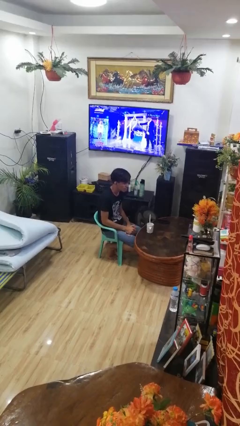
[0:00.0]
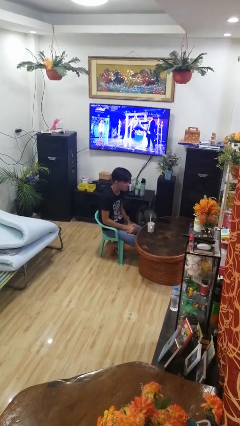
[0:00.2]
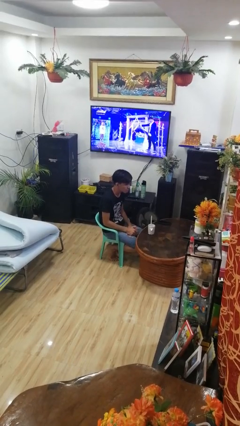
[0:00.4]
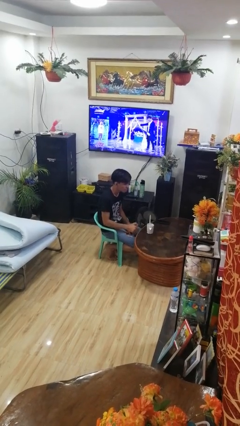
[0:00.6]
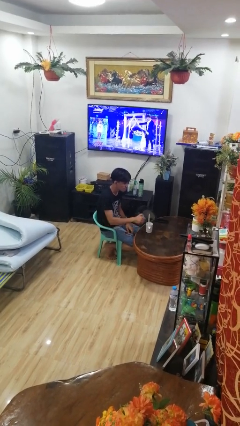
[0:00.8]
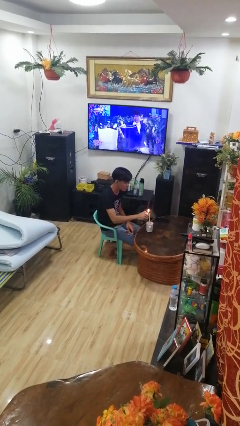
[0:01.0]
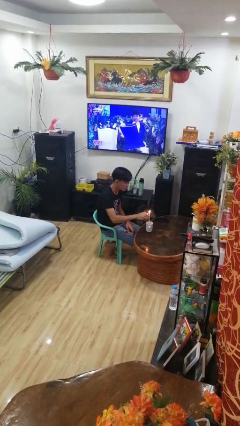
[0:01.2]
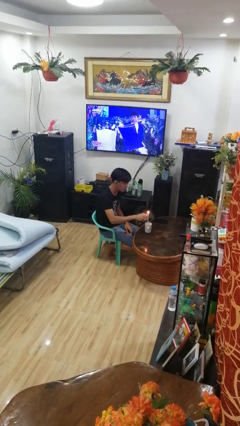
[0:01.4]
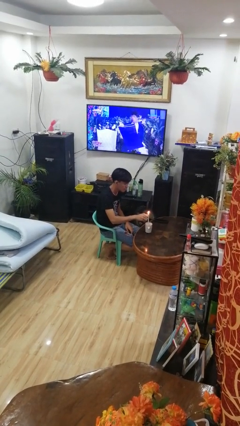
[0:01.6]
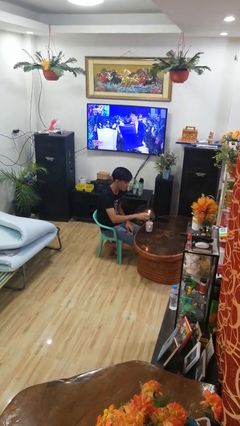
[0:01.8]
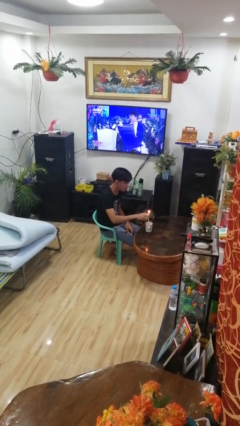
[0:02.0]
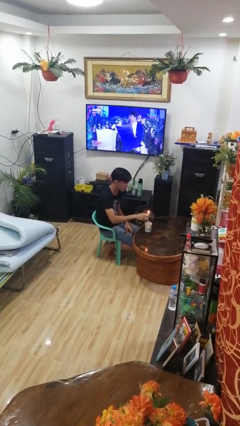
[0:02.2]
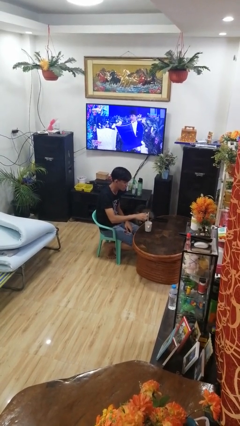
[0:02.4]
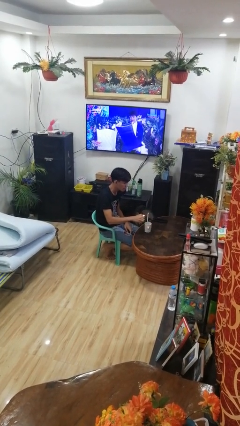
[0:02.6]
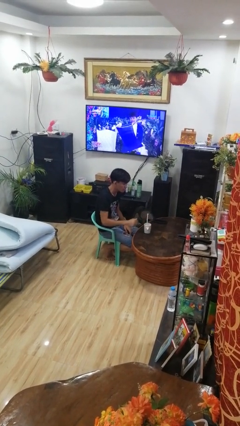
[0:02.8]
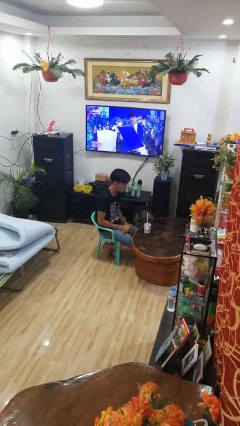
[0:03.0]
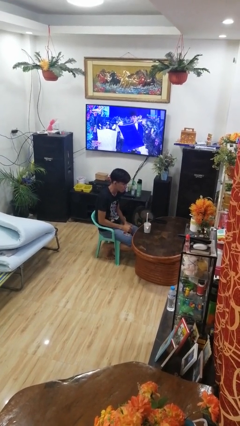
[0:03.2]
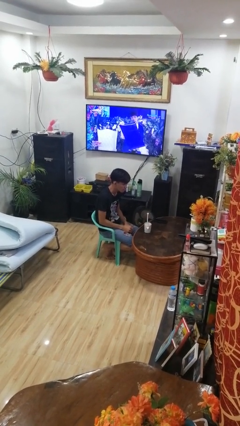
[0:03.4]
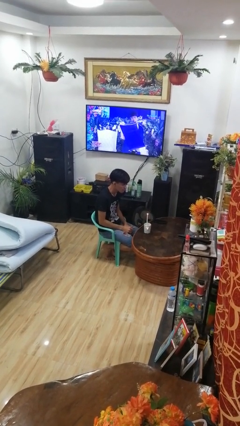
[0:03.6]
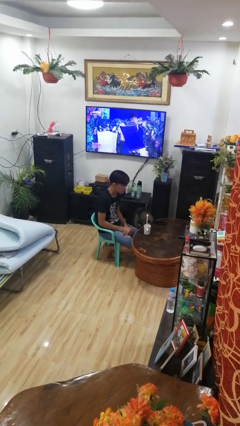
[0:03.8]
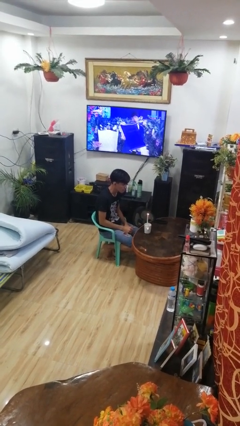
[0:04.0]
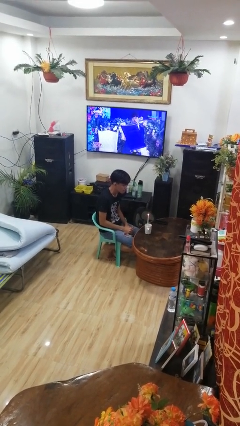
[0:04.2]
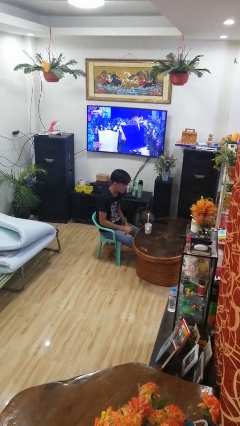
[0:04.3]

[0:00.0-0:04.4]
person lights candle

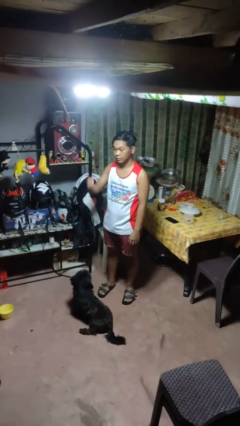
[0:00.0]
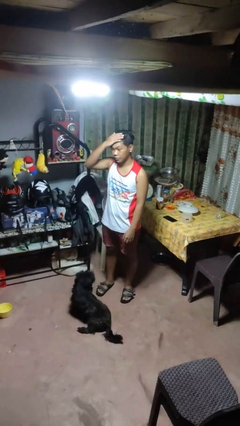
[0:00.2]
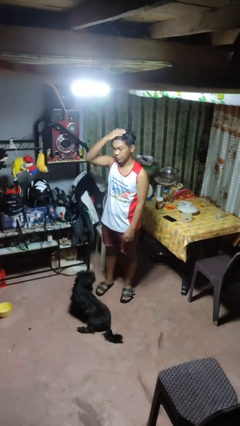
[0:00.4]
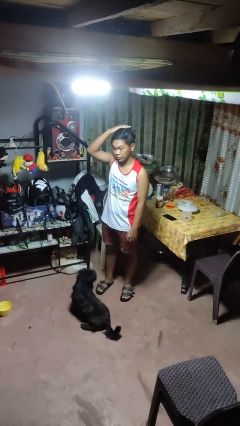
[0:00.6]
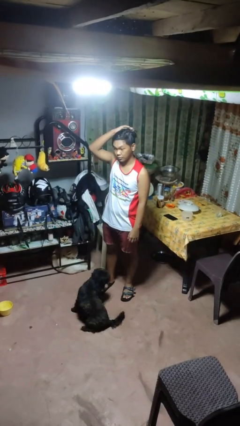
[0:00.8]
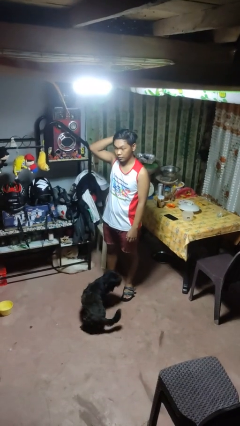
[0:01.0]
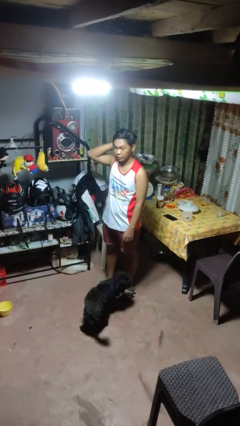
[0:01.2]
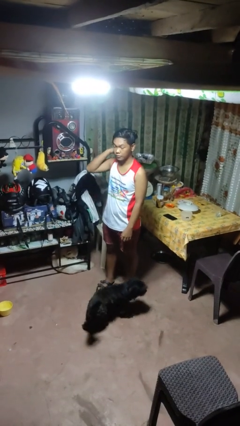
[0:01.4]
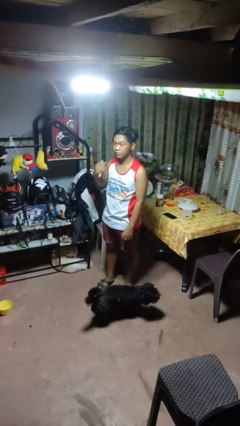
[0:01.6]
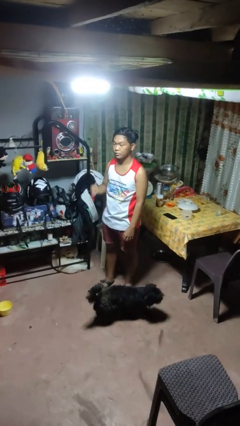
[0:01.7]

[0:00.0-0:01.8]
person pats head

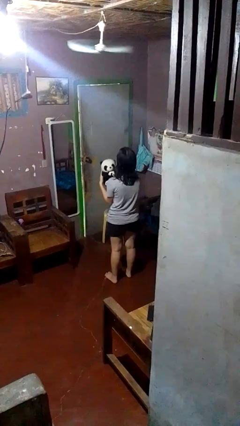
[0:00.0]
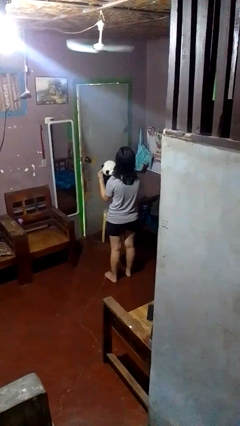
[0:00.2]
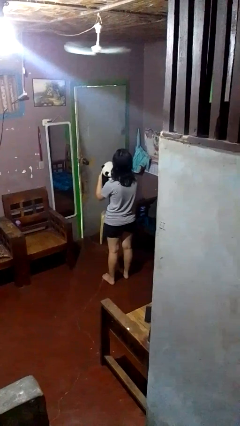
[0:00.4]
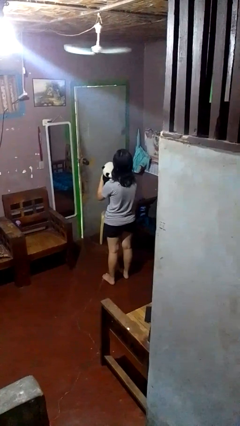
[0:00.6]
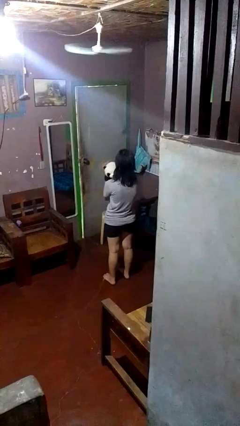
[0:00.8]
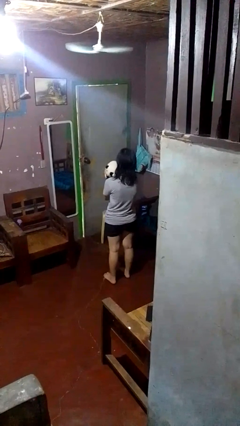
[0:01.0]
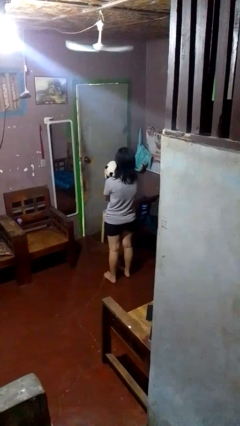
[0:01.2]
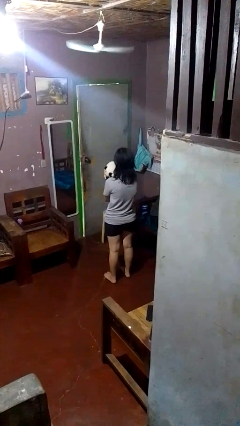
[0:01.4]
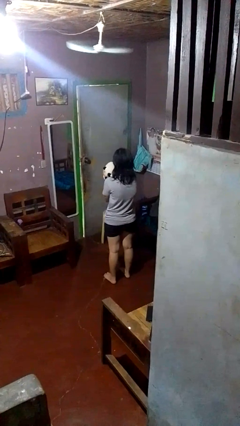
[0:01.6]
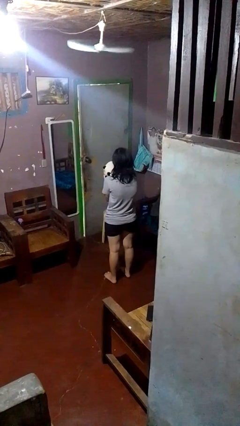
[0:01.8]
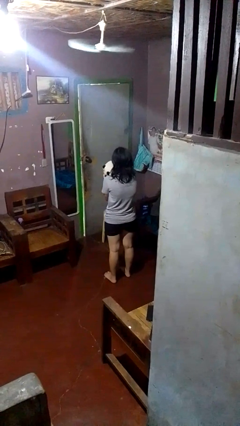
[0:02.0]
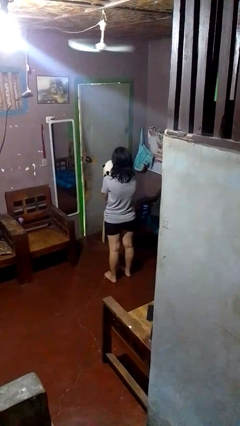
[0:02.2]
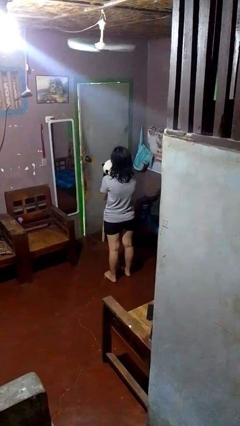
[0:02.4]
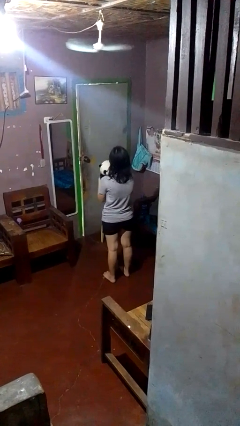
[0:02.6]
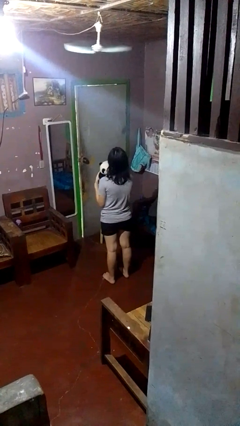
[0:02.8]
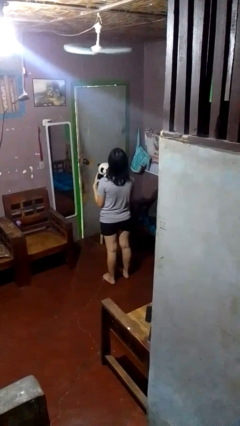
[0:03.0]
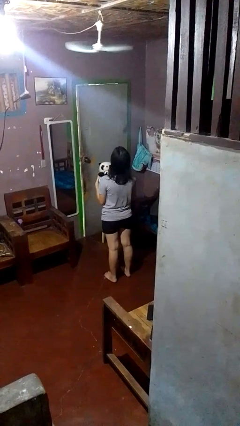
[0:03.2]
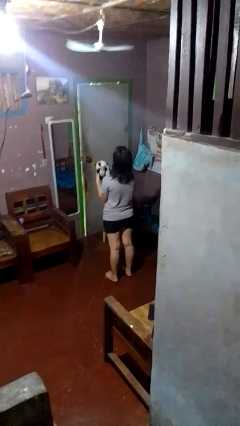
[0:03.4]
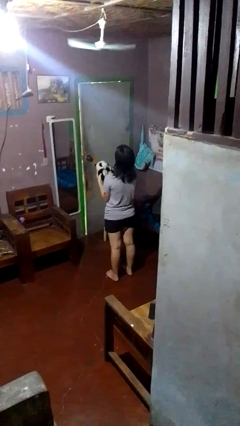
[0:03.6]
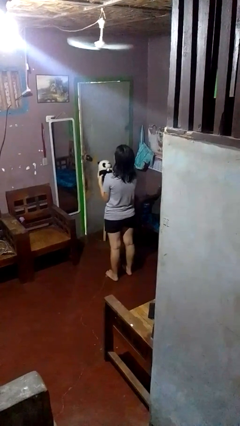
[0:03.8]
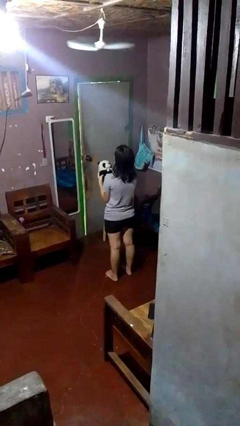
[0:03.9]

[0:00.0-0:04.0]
person hugs stuffed animal

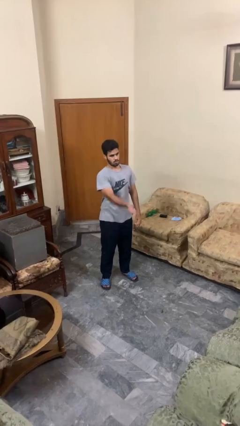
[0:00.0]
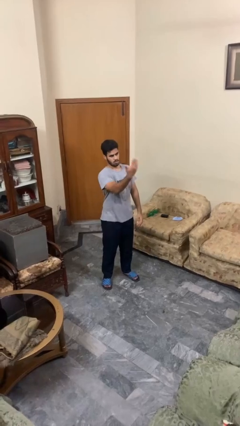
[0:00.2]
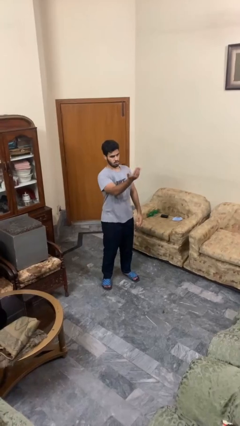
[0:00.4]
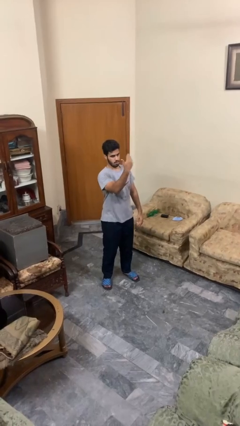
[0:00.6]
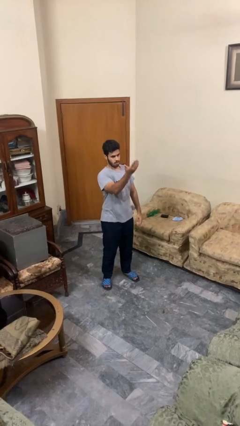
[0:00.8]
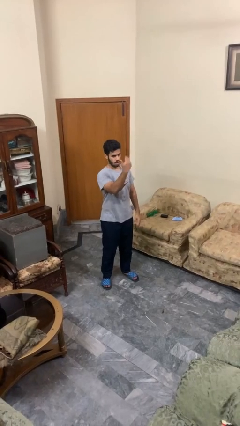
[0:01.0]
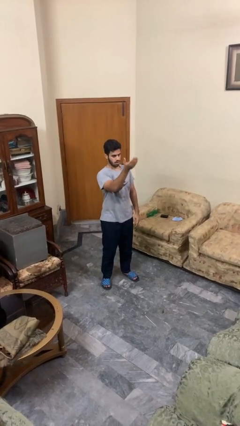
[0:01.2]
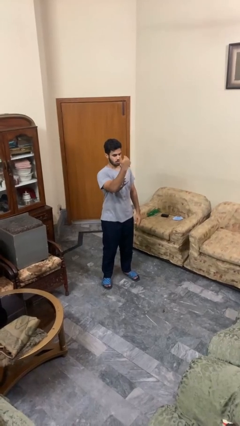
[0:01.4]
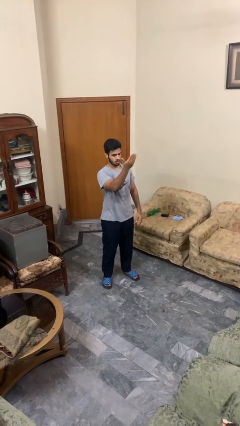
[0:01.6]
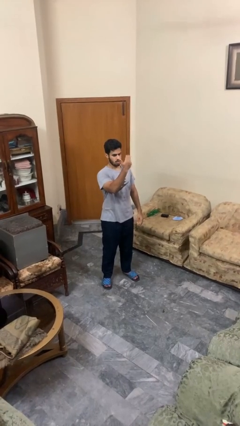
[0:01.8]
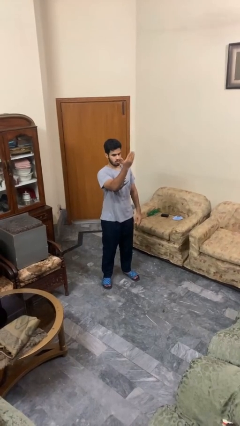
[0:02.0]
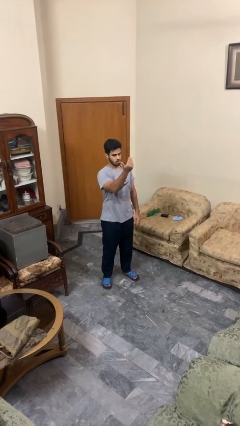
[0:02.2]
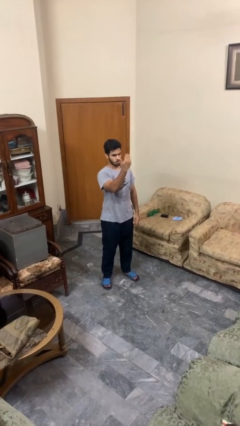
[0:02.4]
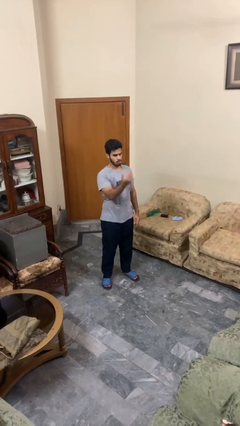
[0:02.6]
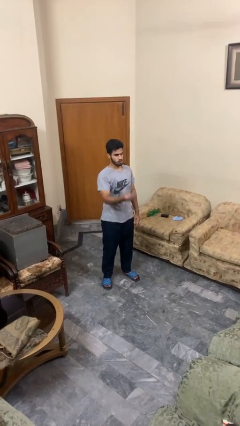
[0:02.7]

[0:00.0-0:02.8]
person gestures come here

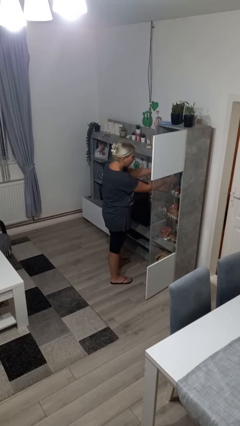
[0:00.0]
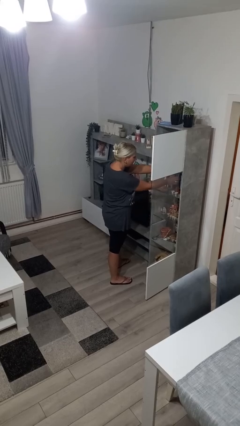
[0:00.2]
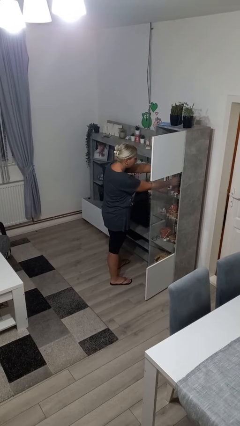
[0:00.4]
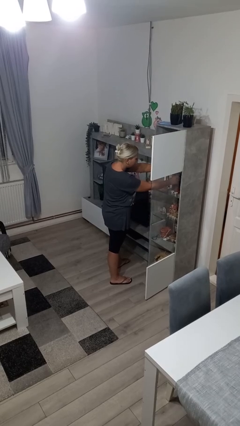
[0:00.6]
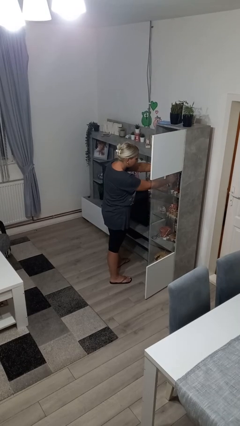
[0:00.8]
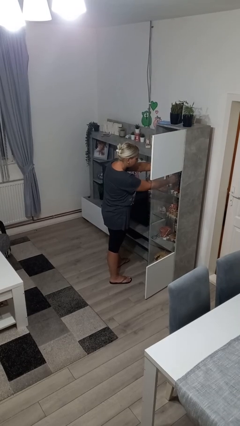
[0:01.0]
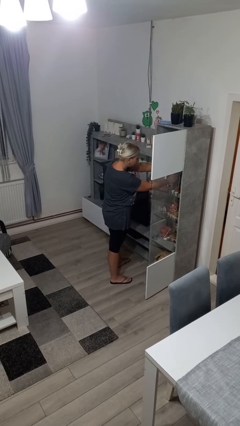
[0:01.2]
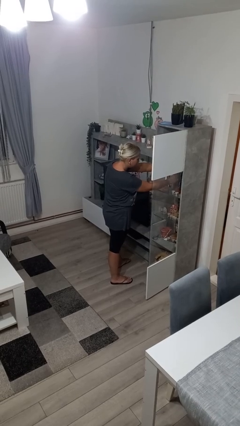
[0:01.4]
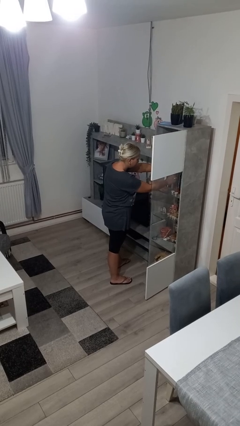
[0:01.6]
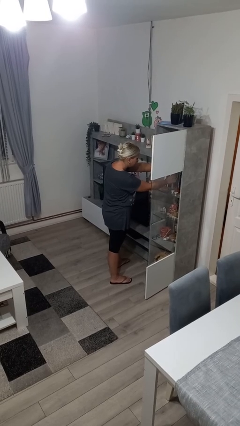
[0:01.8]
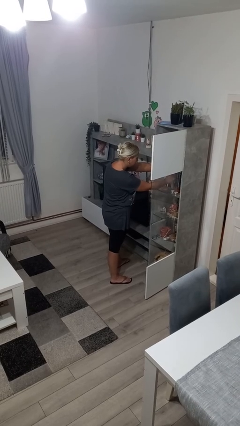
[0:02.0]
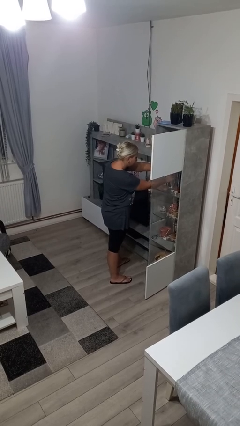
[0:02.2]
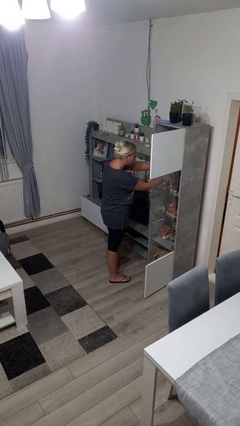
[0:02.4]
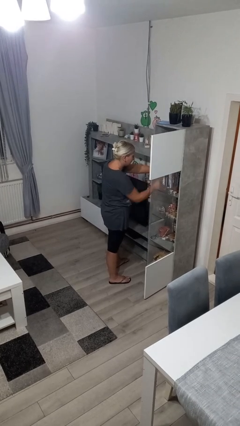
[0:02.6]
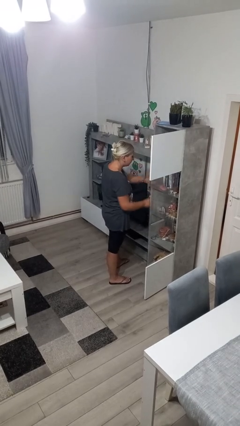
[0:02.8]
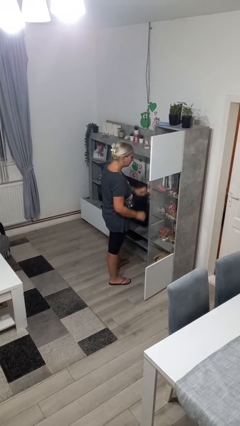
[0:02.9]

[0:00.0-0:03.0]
person searches in cabinet

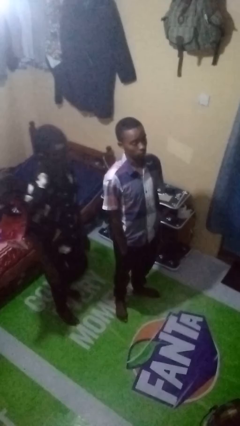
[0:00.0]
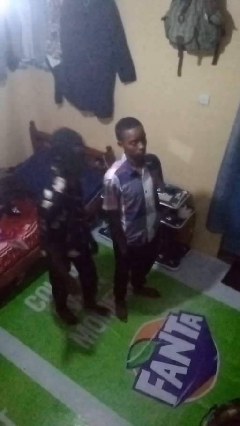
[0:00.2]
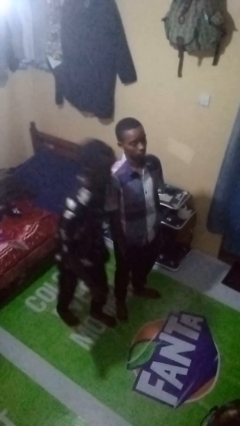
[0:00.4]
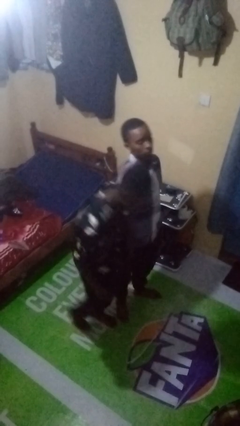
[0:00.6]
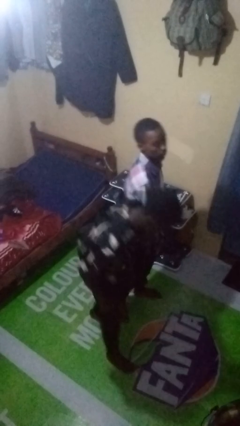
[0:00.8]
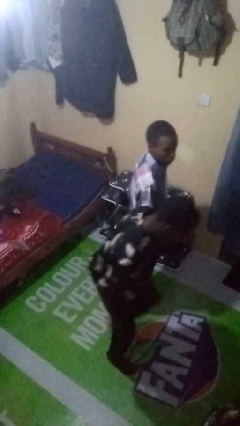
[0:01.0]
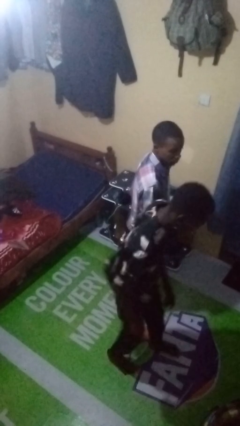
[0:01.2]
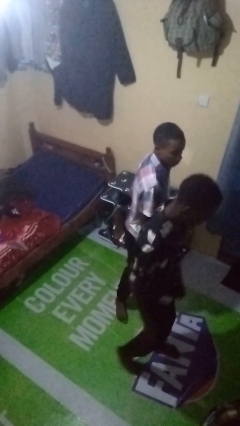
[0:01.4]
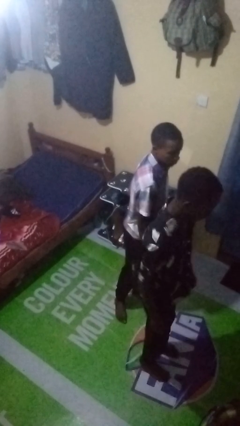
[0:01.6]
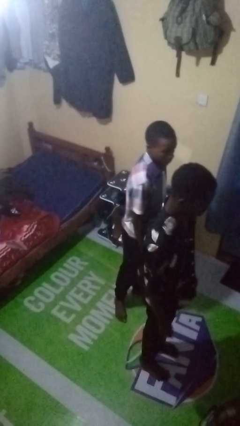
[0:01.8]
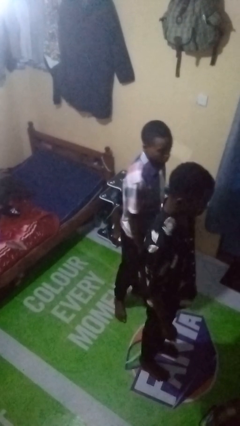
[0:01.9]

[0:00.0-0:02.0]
person bumps into person
